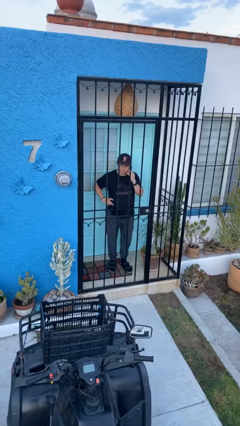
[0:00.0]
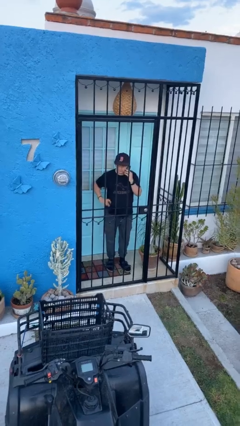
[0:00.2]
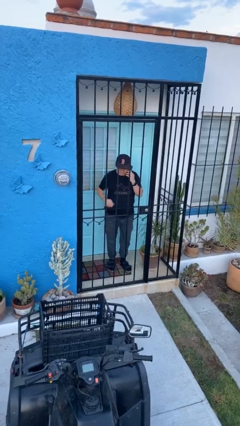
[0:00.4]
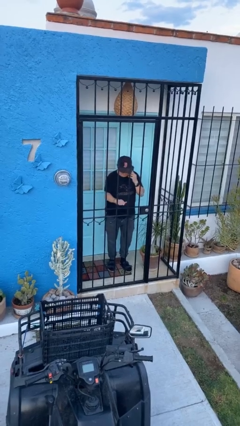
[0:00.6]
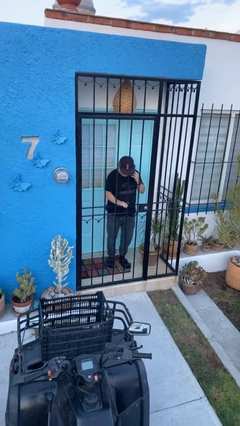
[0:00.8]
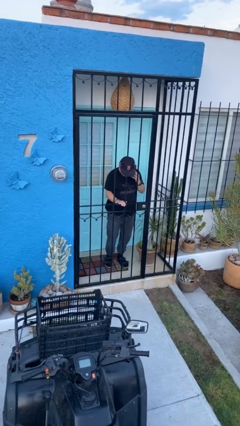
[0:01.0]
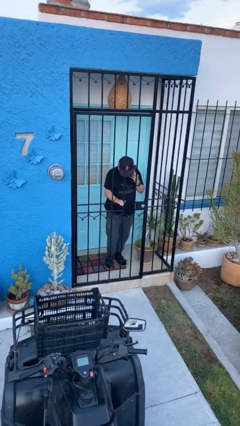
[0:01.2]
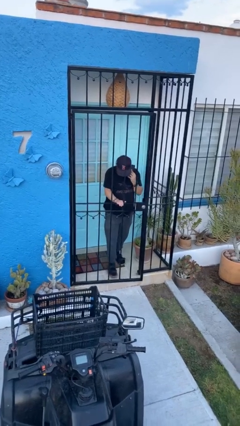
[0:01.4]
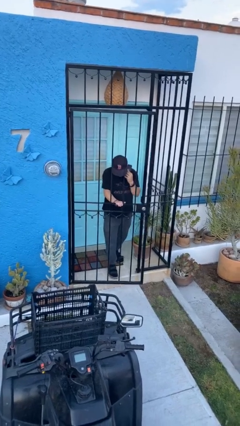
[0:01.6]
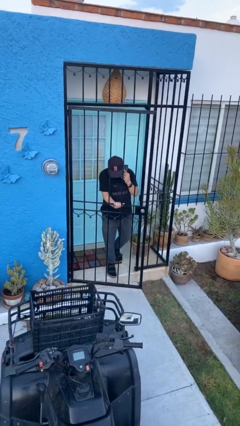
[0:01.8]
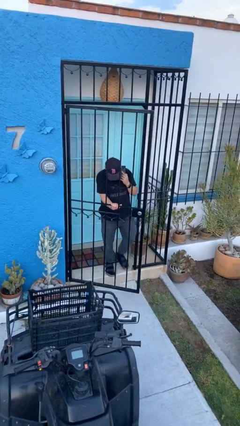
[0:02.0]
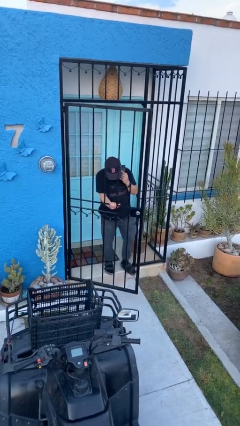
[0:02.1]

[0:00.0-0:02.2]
person opens facility door

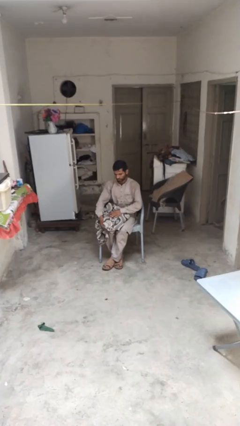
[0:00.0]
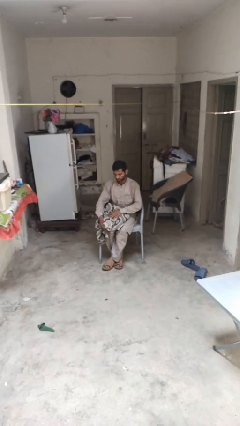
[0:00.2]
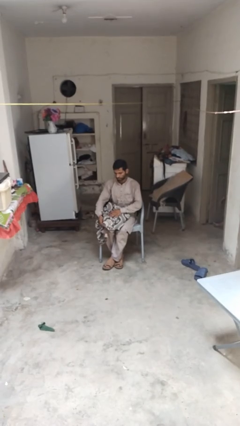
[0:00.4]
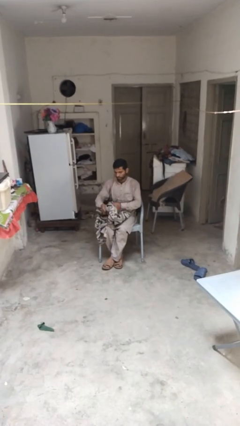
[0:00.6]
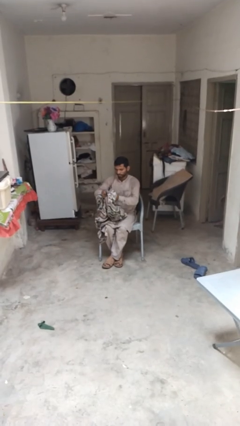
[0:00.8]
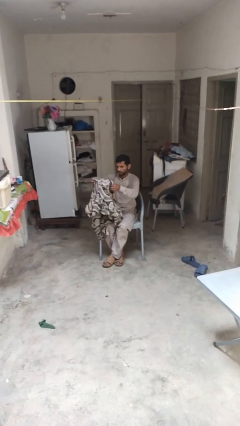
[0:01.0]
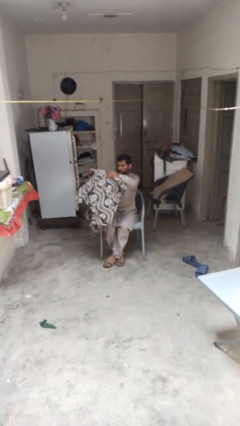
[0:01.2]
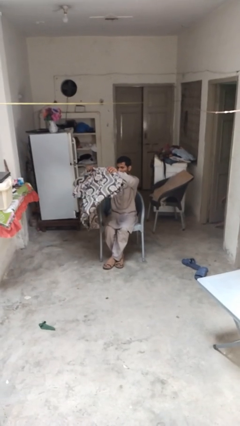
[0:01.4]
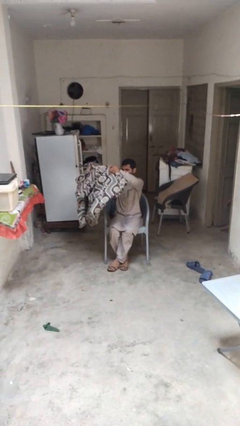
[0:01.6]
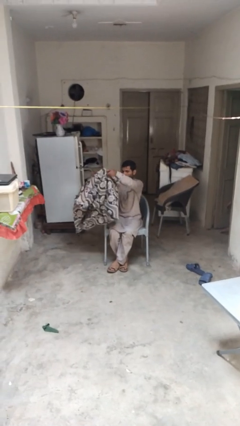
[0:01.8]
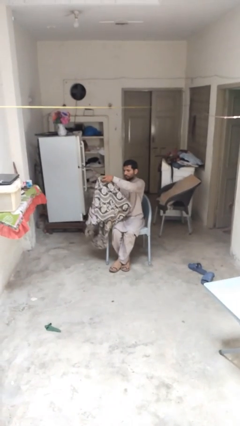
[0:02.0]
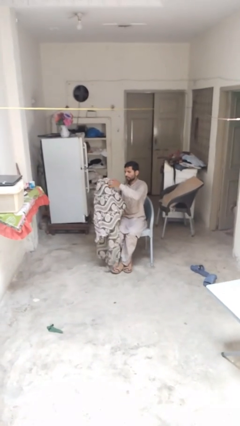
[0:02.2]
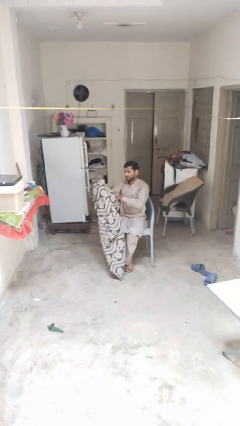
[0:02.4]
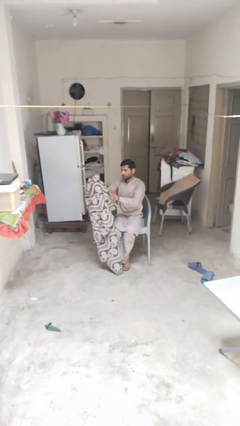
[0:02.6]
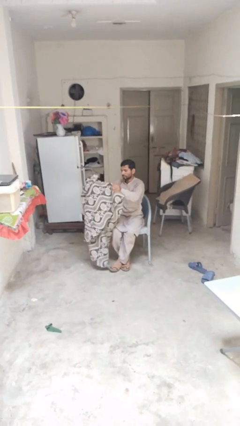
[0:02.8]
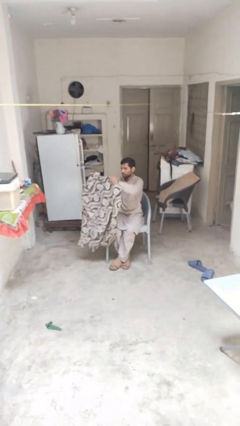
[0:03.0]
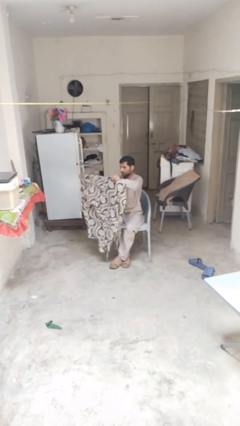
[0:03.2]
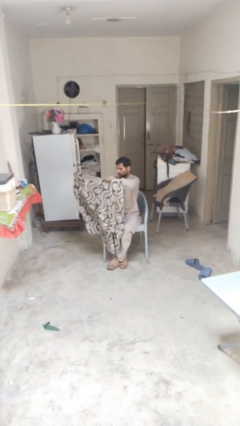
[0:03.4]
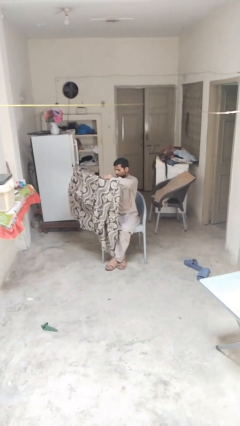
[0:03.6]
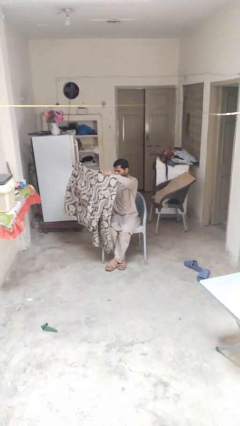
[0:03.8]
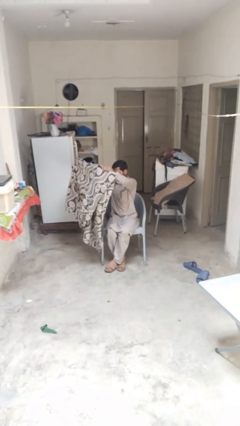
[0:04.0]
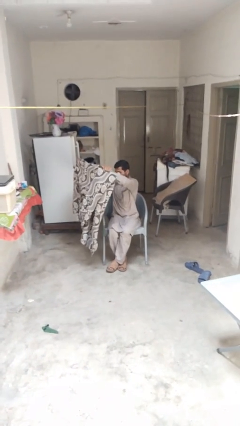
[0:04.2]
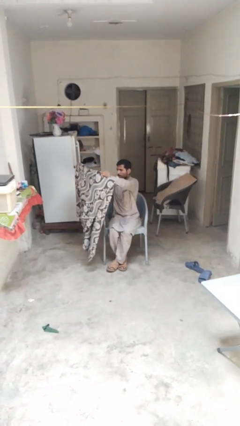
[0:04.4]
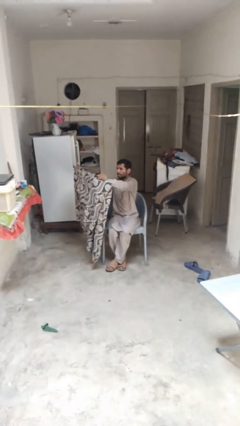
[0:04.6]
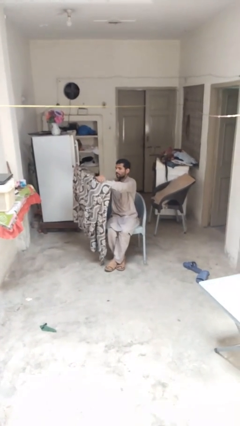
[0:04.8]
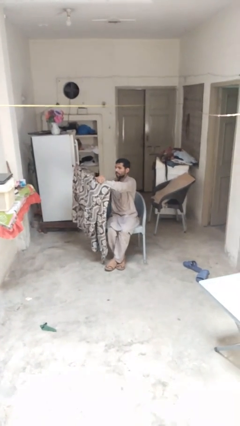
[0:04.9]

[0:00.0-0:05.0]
person unfolds blanket

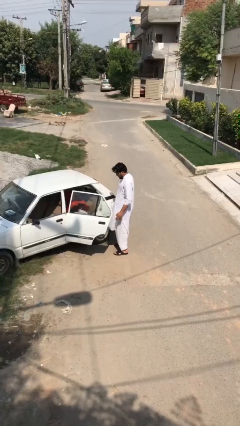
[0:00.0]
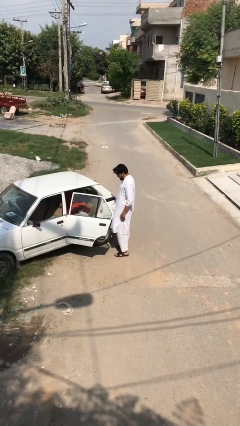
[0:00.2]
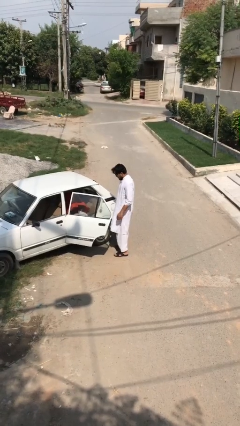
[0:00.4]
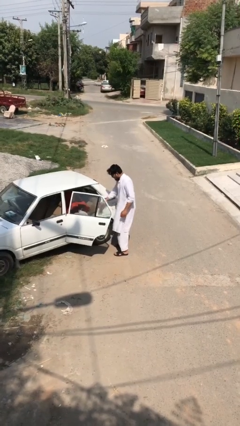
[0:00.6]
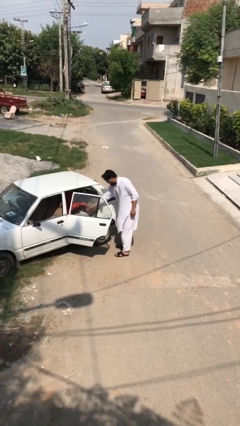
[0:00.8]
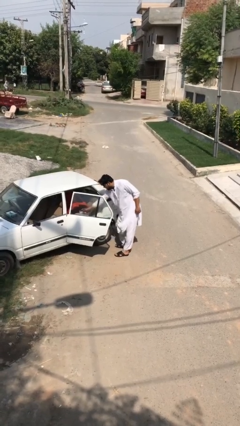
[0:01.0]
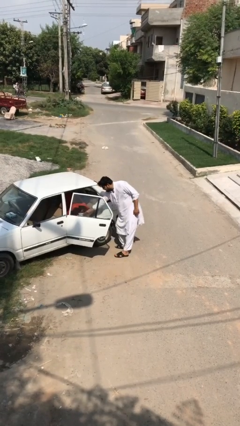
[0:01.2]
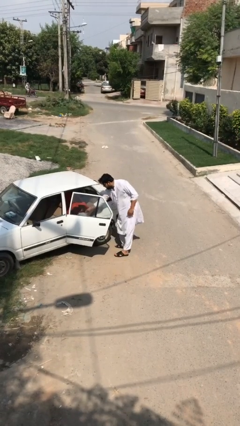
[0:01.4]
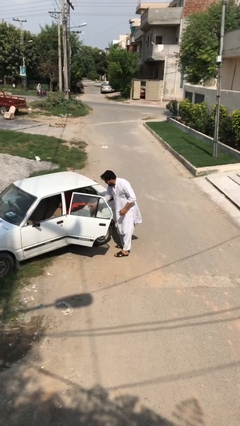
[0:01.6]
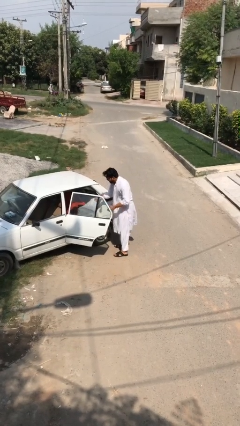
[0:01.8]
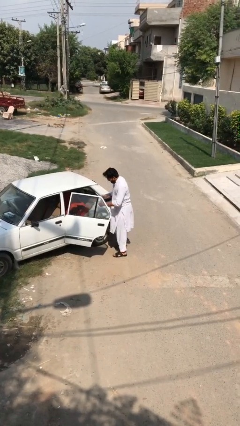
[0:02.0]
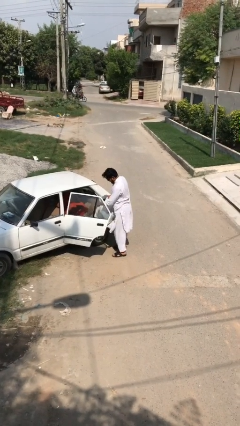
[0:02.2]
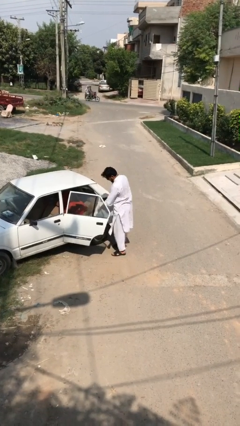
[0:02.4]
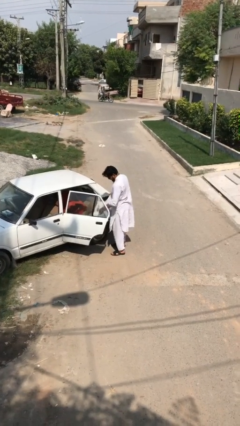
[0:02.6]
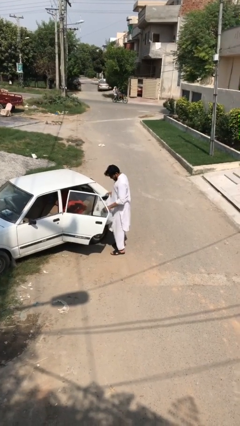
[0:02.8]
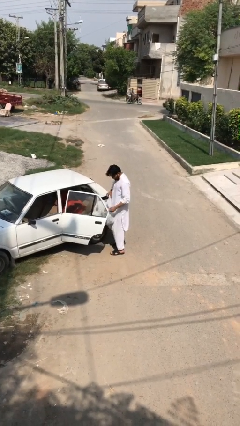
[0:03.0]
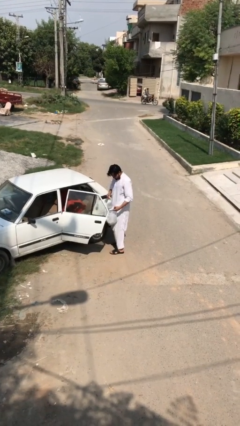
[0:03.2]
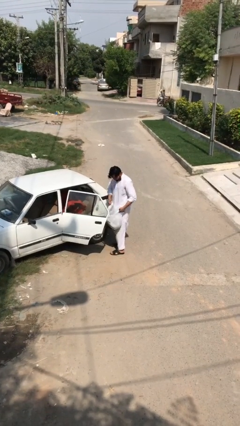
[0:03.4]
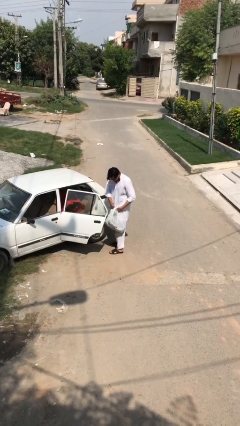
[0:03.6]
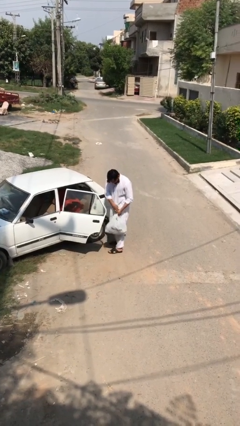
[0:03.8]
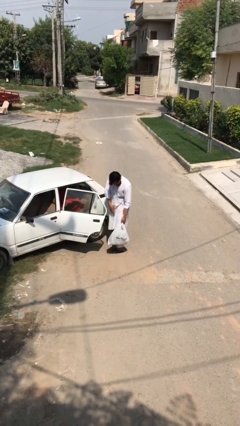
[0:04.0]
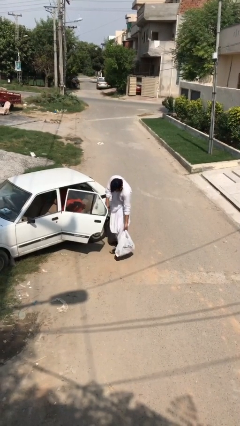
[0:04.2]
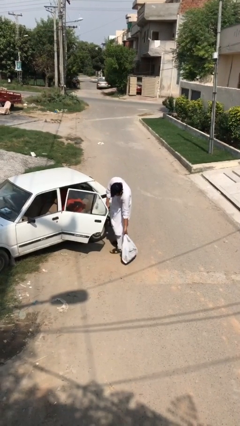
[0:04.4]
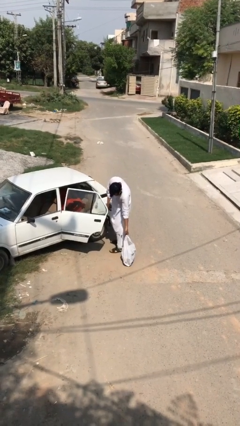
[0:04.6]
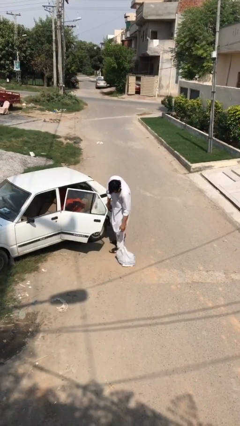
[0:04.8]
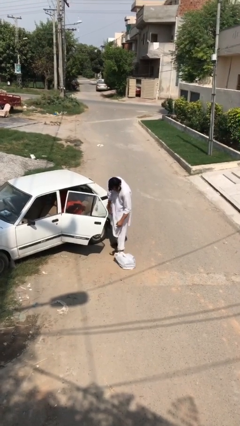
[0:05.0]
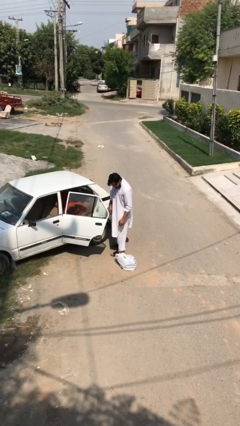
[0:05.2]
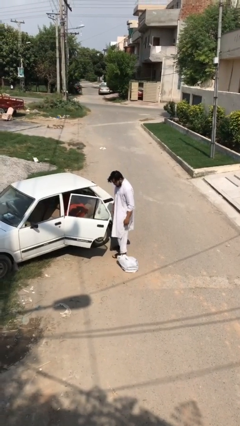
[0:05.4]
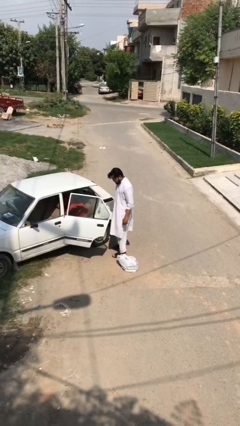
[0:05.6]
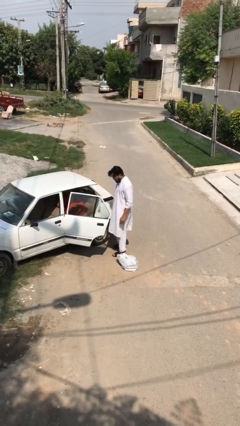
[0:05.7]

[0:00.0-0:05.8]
person unloads car

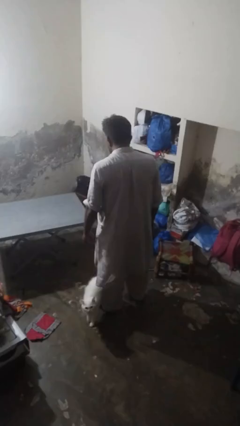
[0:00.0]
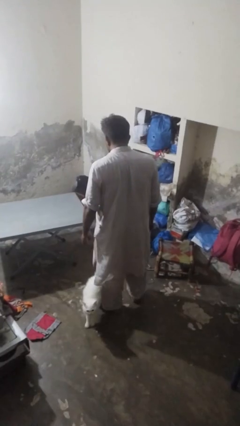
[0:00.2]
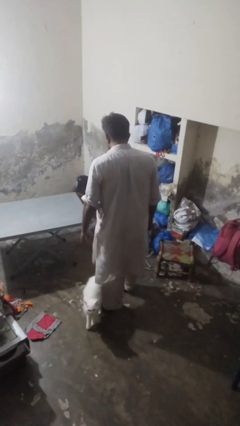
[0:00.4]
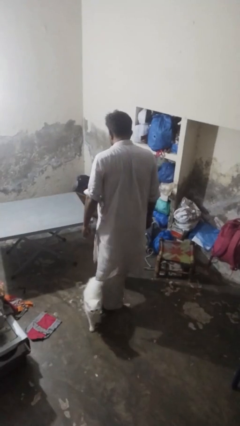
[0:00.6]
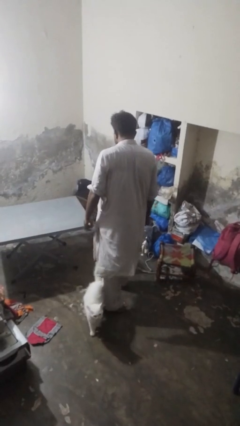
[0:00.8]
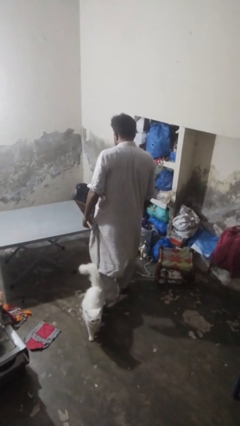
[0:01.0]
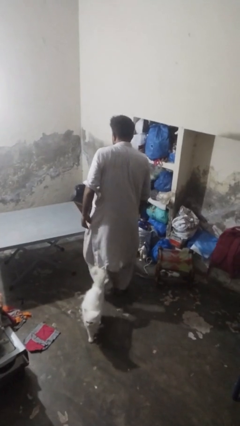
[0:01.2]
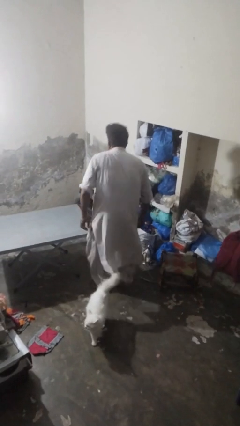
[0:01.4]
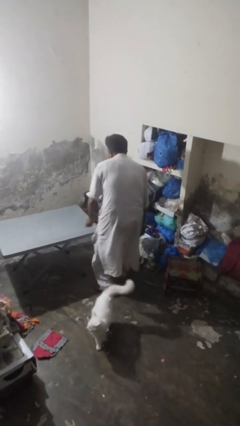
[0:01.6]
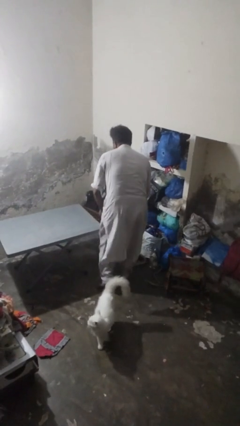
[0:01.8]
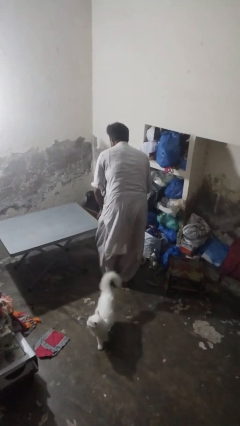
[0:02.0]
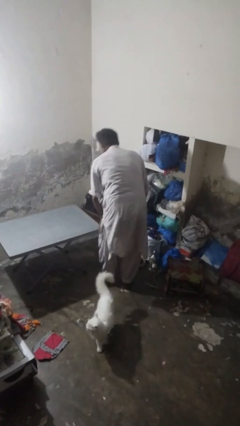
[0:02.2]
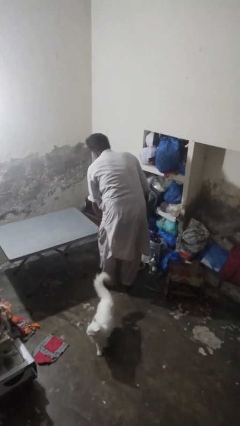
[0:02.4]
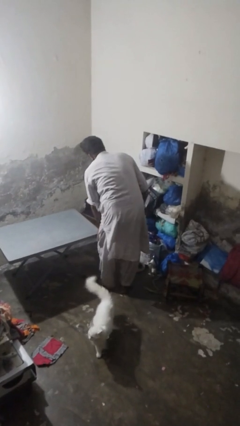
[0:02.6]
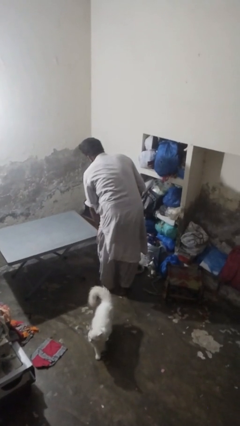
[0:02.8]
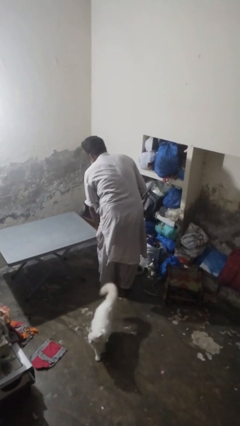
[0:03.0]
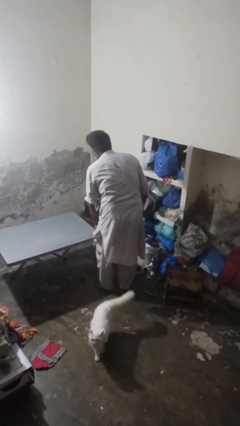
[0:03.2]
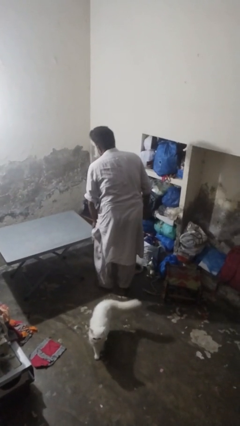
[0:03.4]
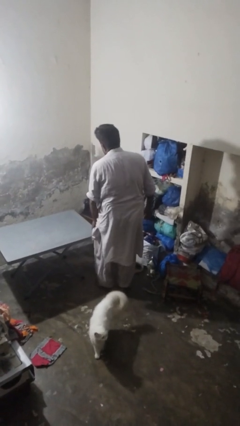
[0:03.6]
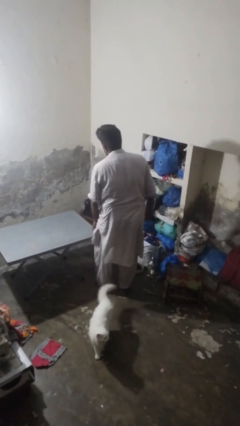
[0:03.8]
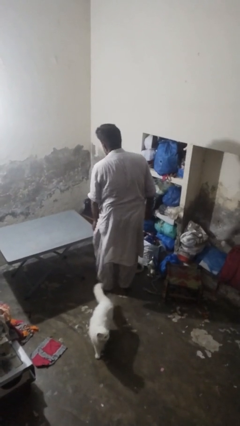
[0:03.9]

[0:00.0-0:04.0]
person bumps into table

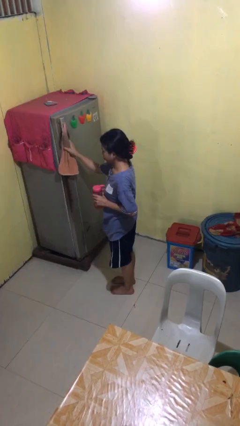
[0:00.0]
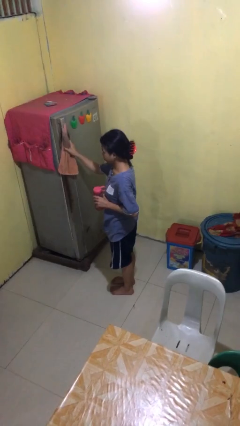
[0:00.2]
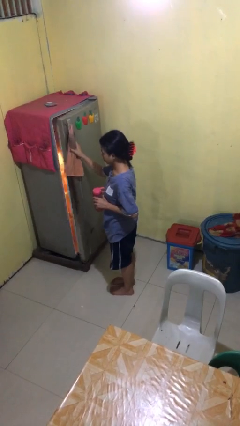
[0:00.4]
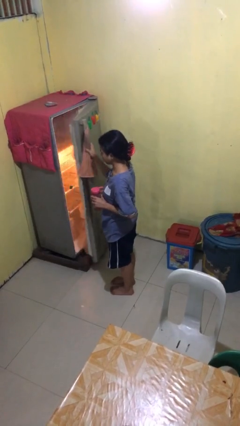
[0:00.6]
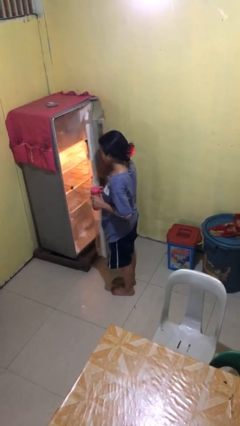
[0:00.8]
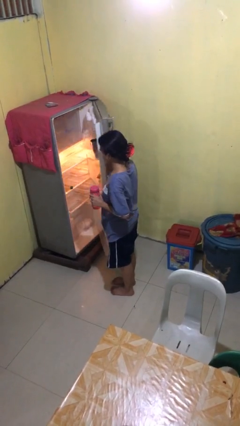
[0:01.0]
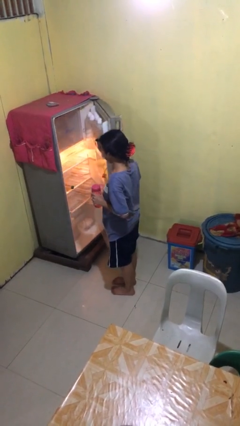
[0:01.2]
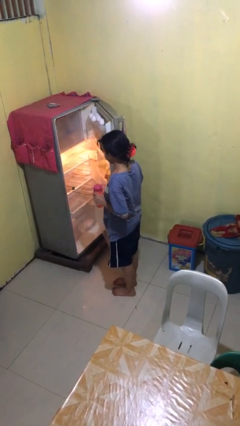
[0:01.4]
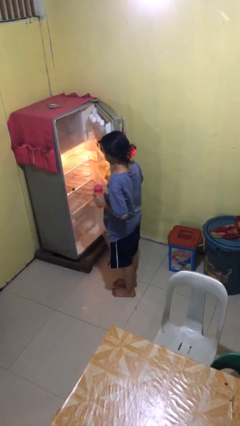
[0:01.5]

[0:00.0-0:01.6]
person opens refrigerator
